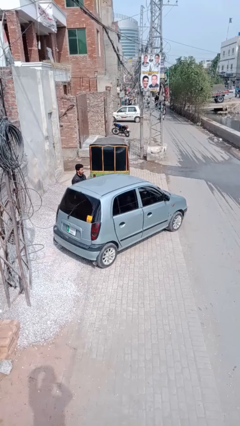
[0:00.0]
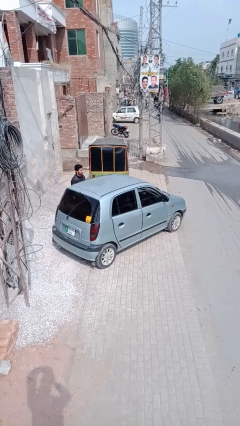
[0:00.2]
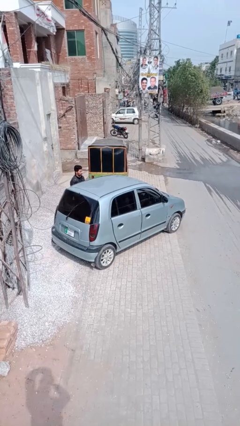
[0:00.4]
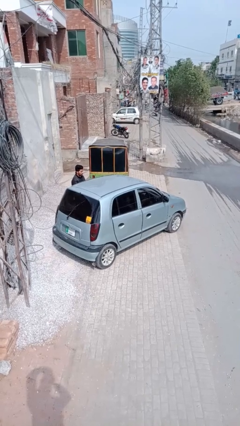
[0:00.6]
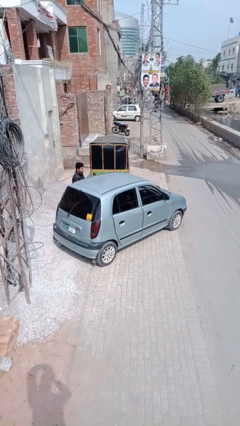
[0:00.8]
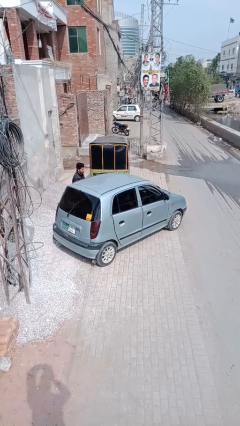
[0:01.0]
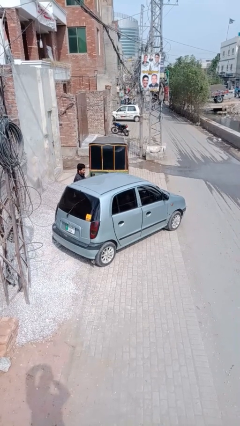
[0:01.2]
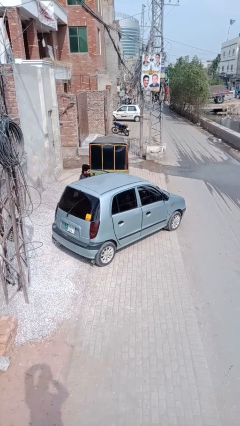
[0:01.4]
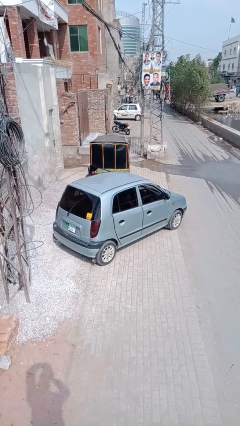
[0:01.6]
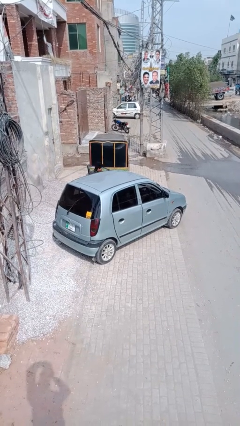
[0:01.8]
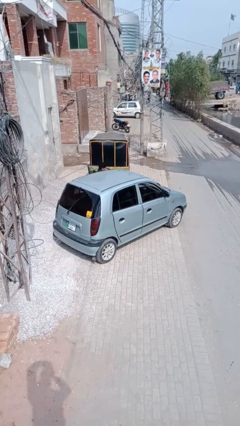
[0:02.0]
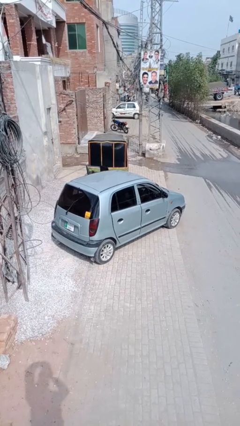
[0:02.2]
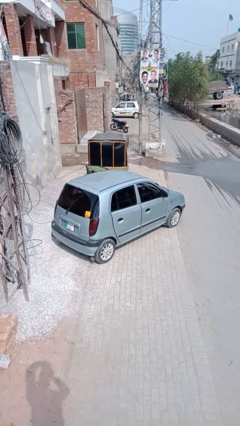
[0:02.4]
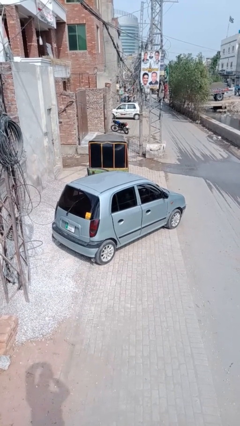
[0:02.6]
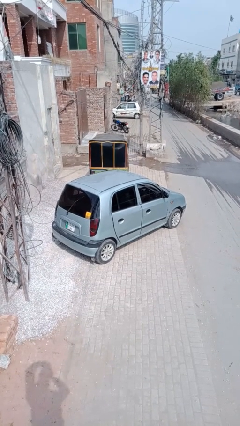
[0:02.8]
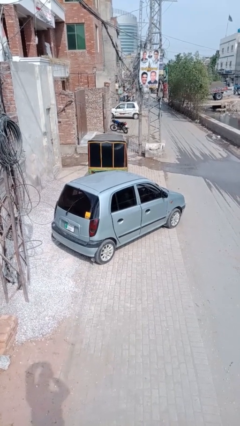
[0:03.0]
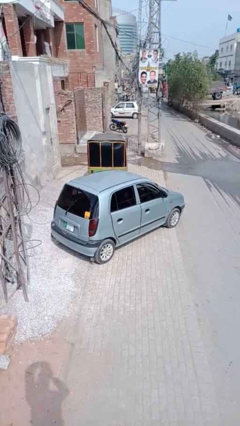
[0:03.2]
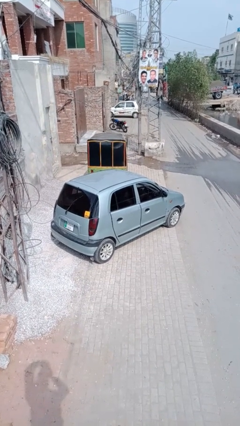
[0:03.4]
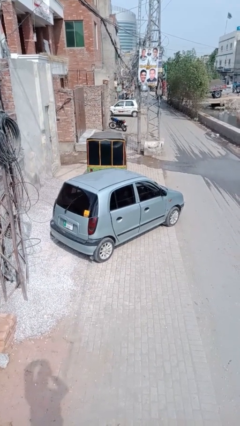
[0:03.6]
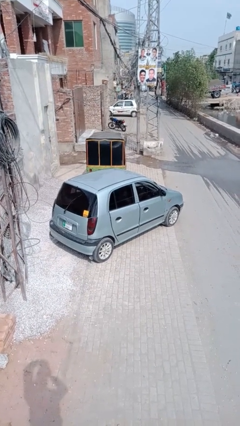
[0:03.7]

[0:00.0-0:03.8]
car picks up person

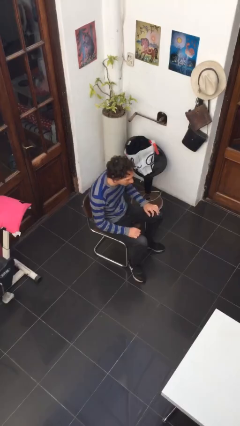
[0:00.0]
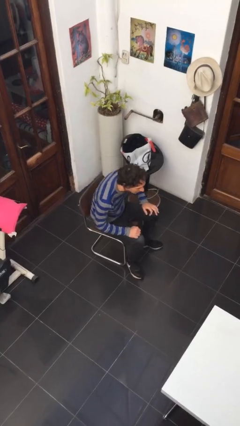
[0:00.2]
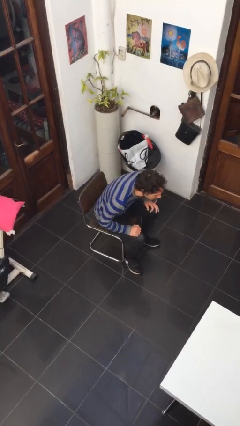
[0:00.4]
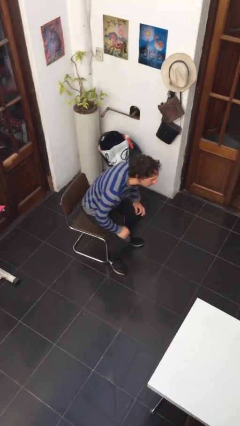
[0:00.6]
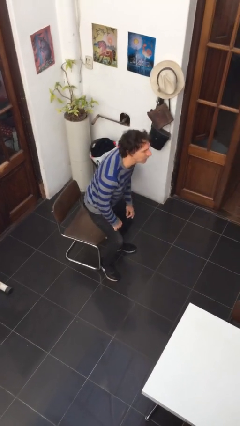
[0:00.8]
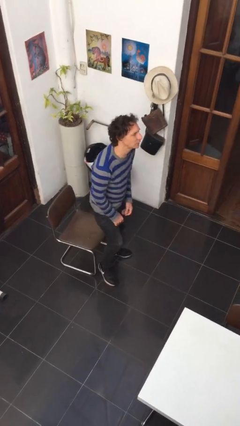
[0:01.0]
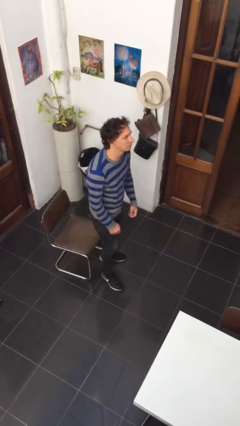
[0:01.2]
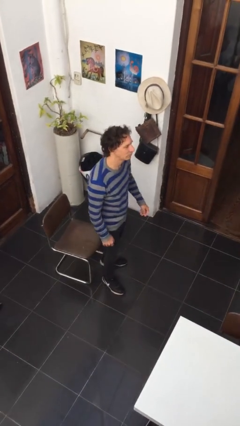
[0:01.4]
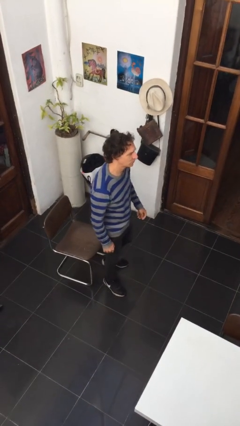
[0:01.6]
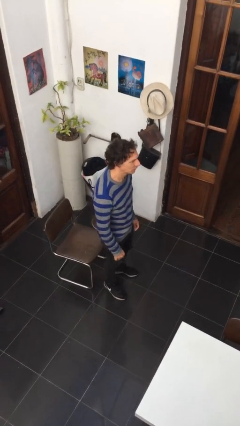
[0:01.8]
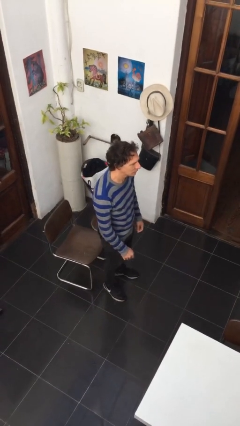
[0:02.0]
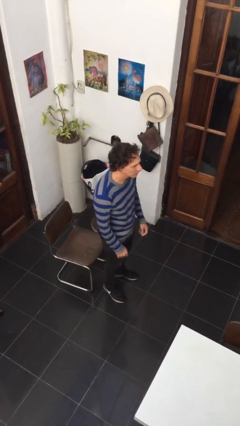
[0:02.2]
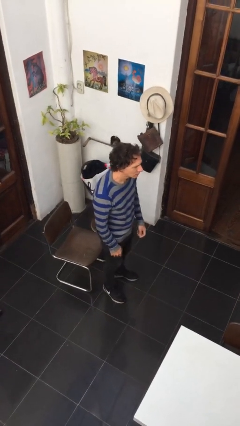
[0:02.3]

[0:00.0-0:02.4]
person stands up

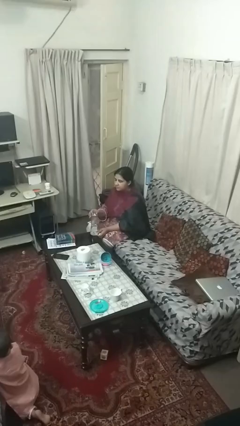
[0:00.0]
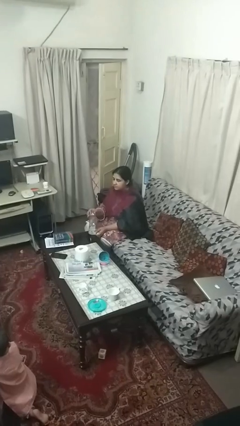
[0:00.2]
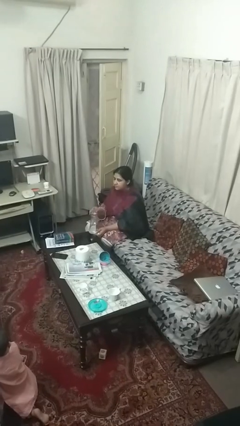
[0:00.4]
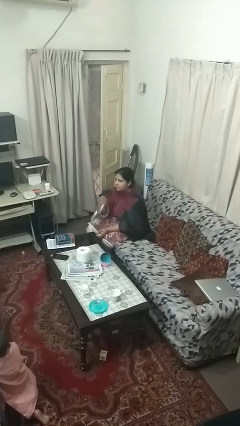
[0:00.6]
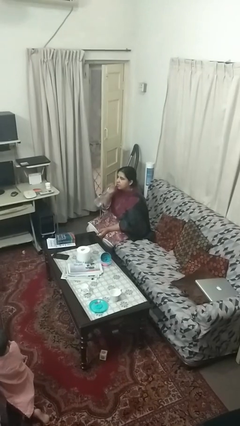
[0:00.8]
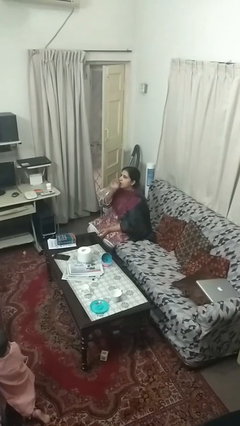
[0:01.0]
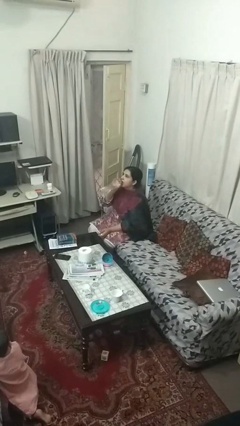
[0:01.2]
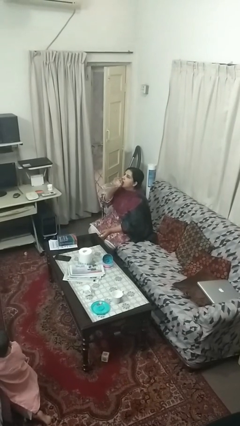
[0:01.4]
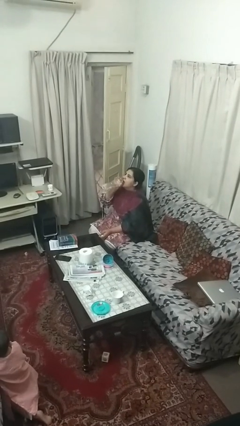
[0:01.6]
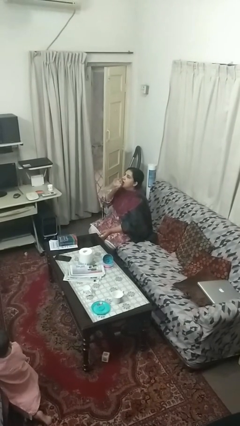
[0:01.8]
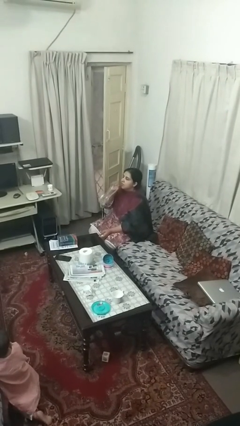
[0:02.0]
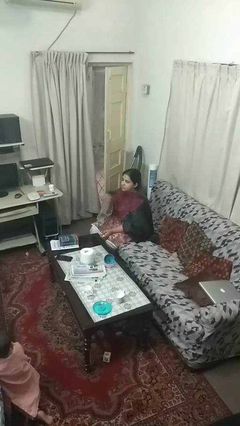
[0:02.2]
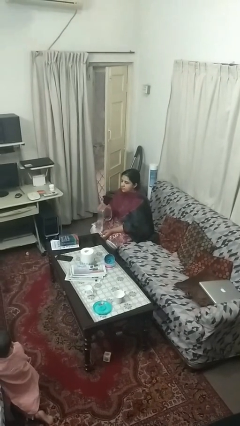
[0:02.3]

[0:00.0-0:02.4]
person drinks from bottle

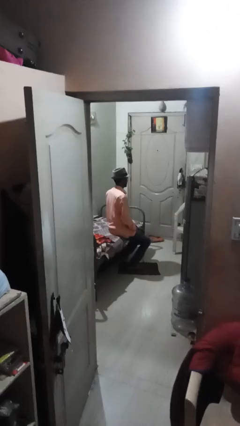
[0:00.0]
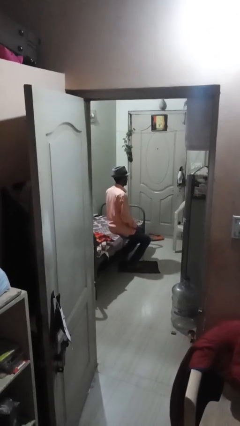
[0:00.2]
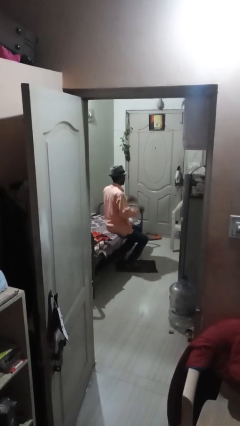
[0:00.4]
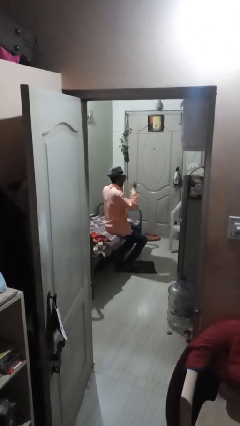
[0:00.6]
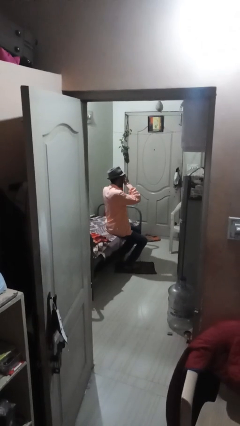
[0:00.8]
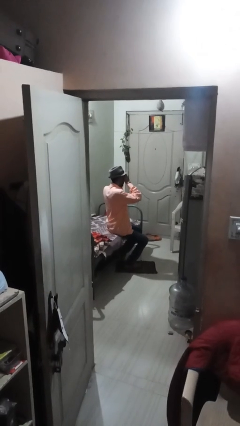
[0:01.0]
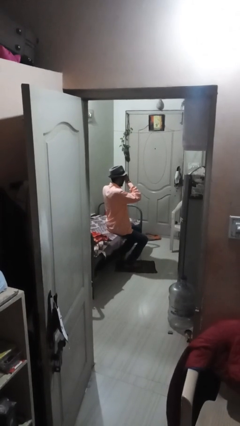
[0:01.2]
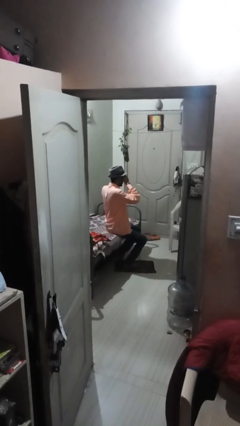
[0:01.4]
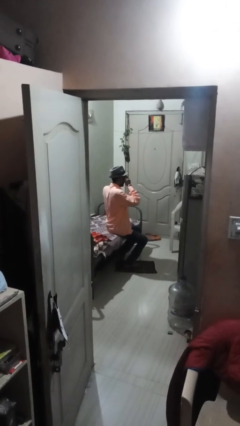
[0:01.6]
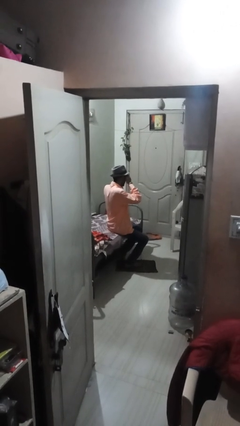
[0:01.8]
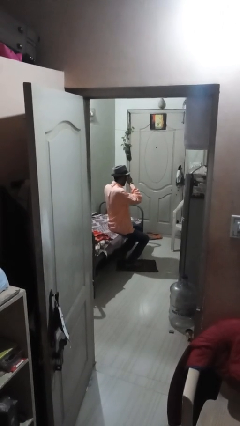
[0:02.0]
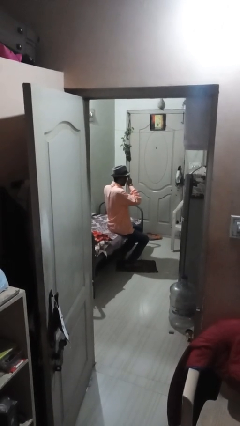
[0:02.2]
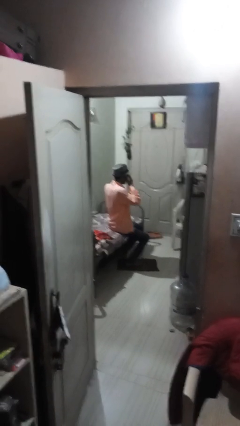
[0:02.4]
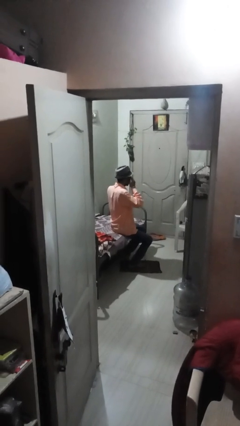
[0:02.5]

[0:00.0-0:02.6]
person covers face with hands

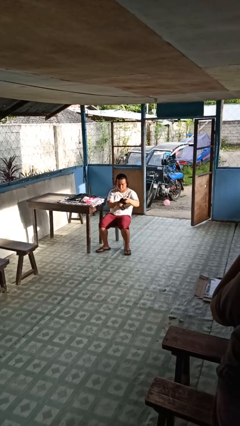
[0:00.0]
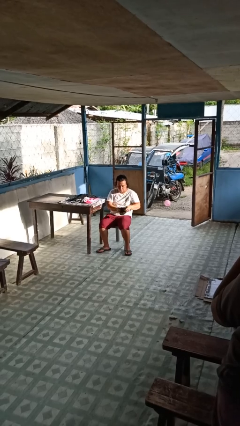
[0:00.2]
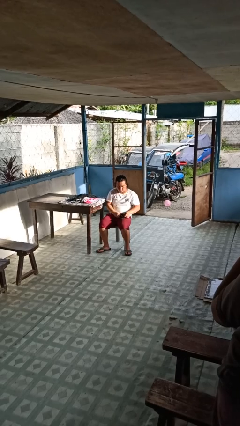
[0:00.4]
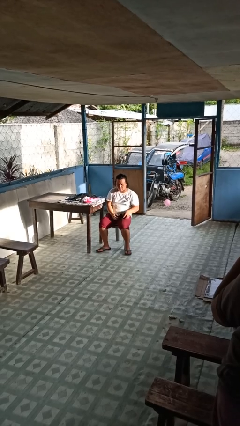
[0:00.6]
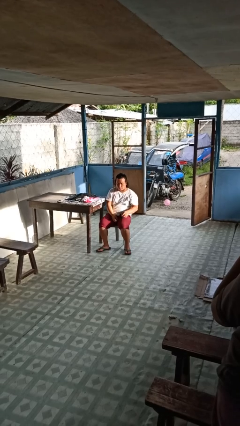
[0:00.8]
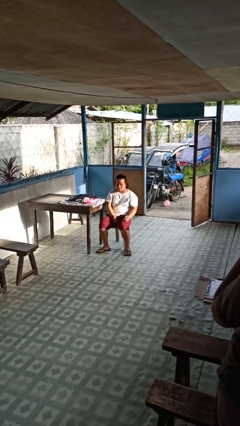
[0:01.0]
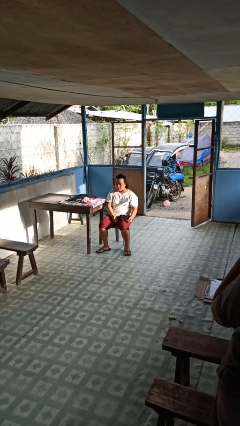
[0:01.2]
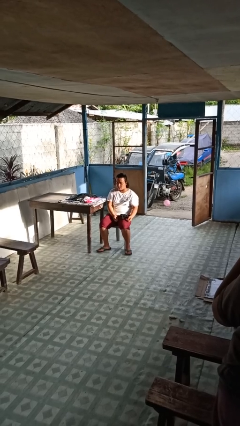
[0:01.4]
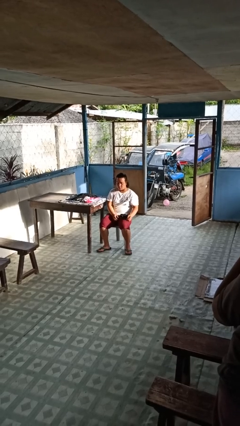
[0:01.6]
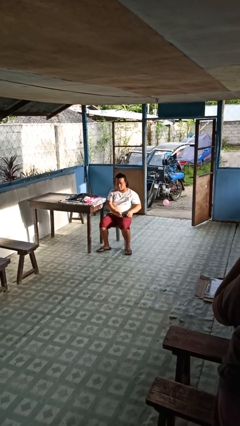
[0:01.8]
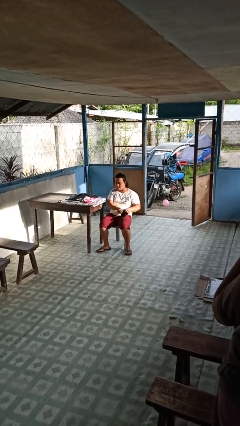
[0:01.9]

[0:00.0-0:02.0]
person folds socks

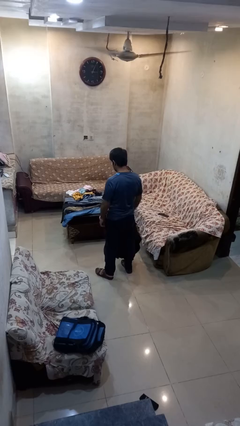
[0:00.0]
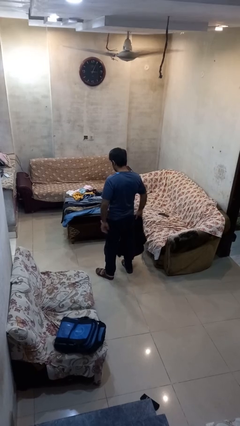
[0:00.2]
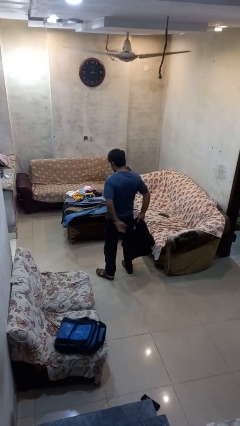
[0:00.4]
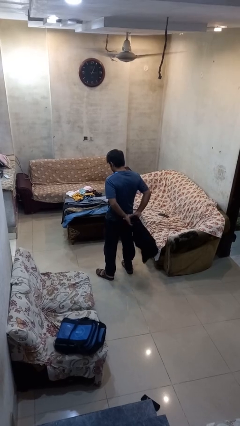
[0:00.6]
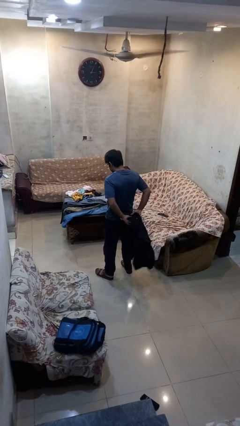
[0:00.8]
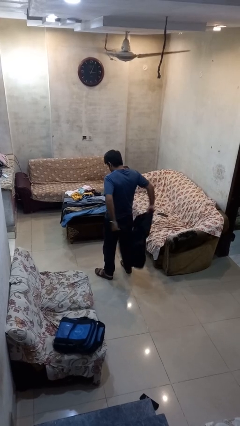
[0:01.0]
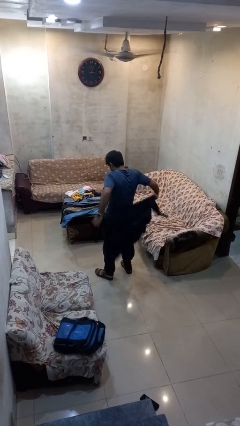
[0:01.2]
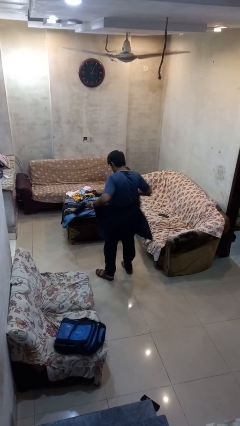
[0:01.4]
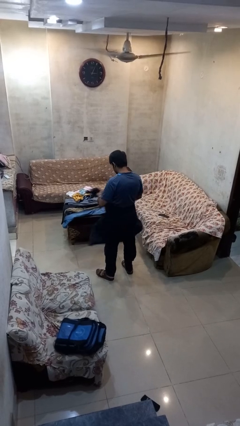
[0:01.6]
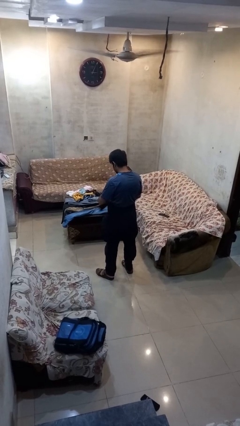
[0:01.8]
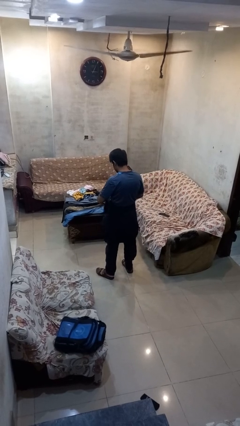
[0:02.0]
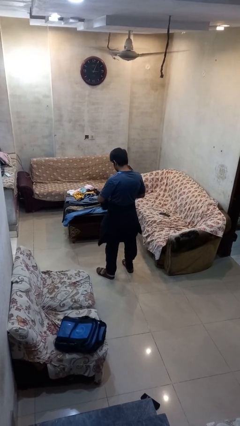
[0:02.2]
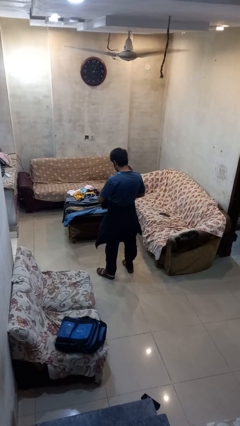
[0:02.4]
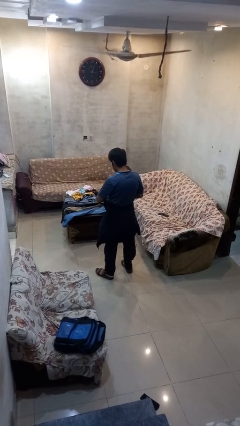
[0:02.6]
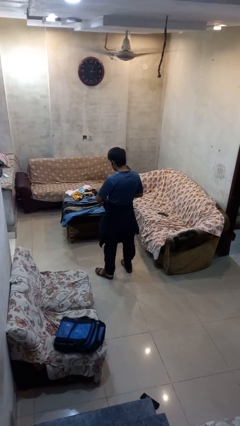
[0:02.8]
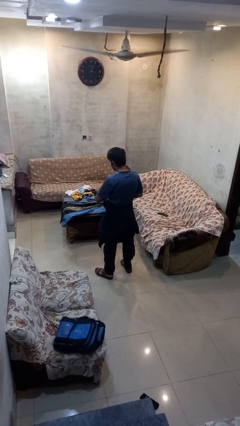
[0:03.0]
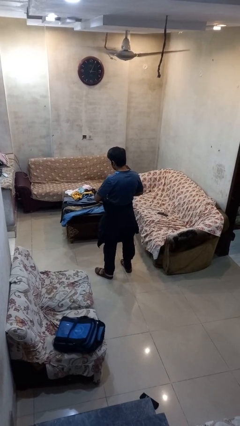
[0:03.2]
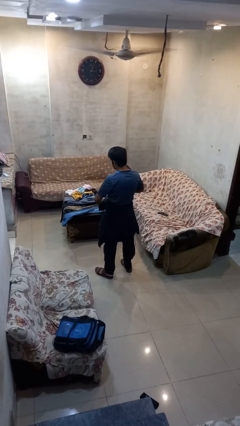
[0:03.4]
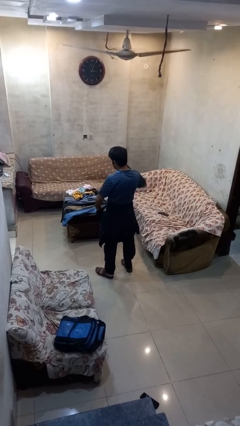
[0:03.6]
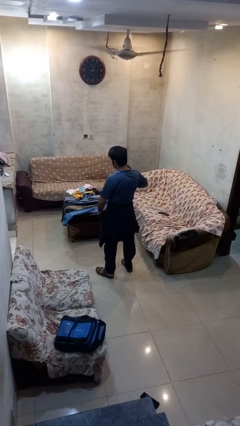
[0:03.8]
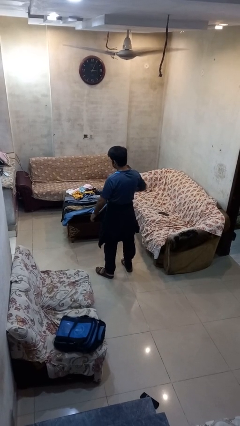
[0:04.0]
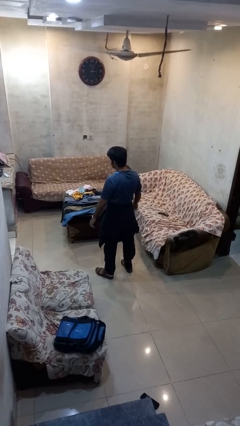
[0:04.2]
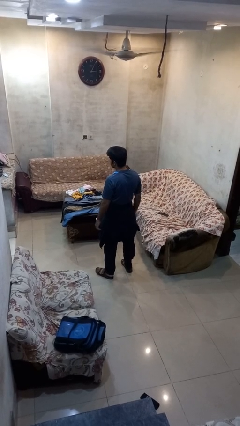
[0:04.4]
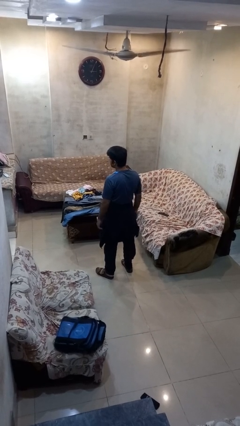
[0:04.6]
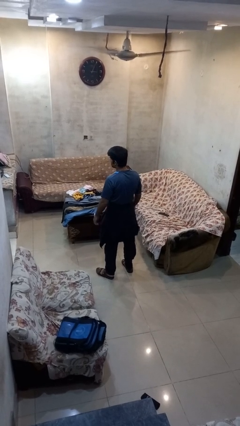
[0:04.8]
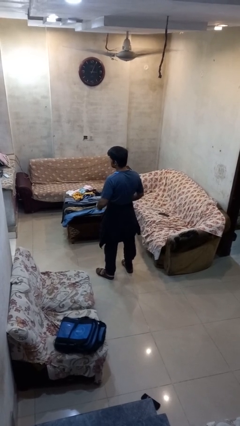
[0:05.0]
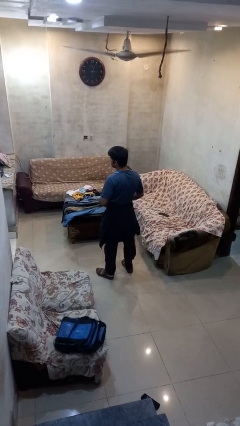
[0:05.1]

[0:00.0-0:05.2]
person ties jacket around waist
